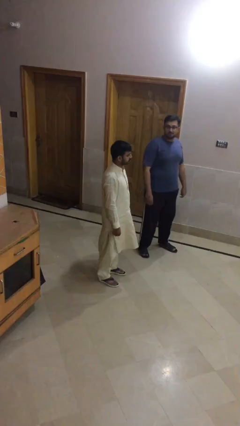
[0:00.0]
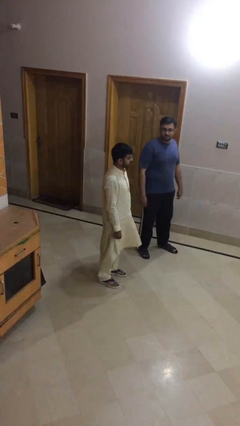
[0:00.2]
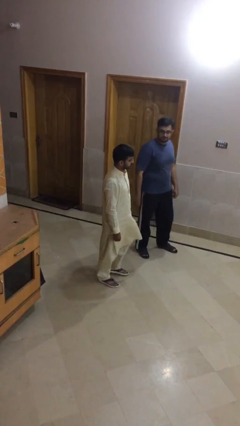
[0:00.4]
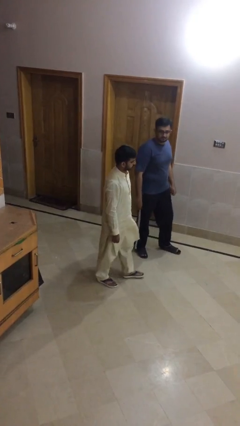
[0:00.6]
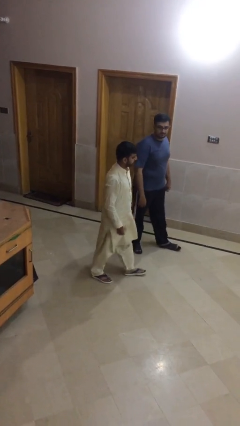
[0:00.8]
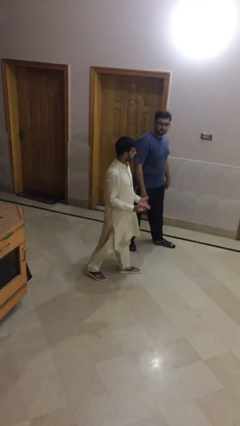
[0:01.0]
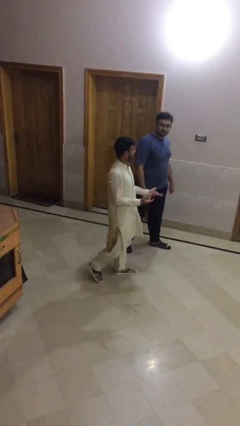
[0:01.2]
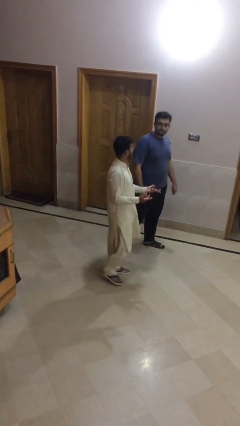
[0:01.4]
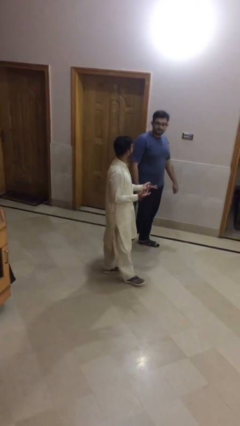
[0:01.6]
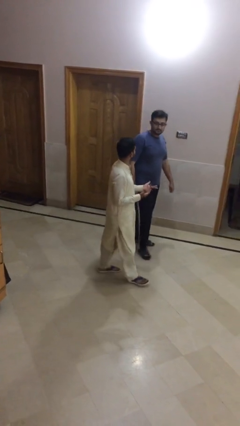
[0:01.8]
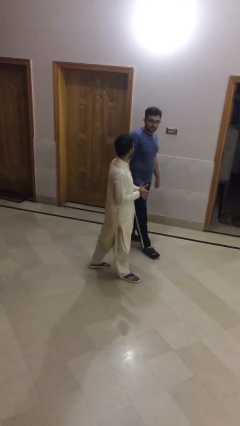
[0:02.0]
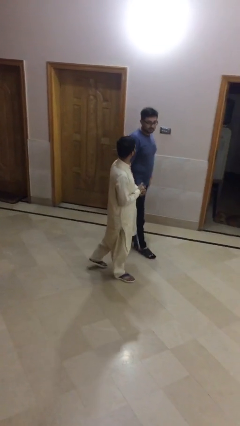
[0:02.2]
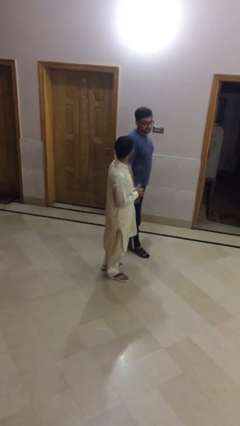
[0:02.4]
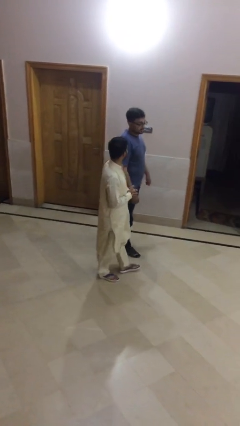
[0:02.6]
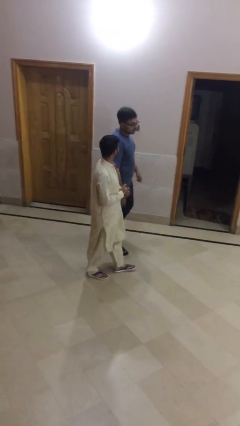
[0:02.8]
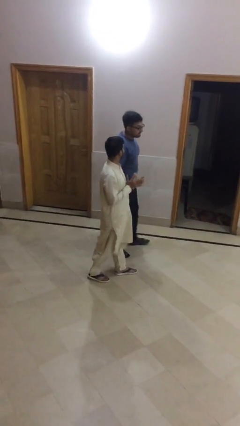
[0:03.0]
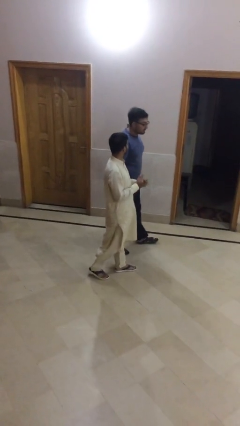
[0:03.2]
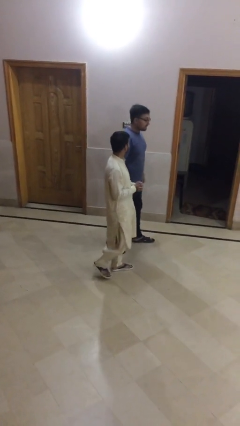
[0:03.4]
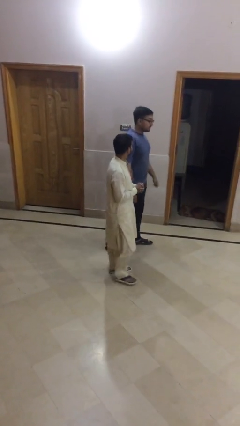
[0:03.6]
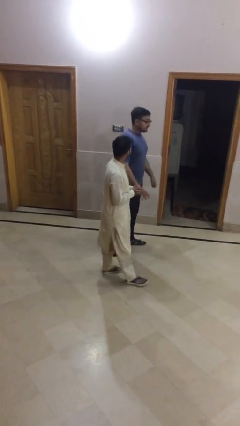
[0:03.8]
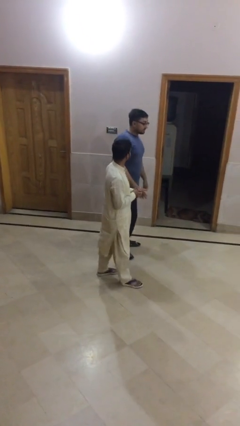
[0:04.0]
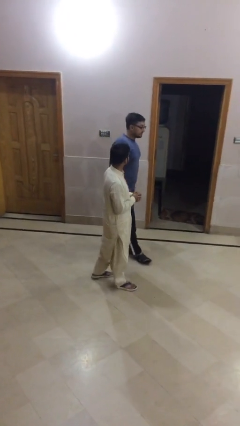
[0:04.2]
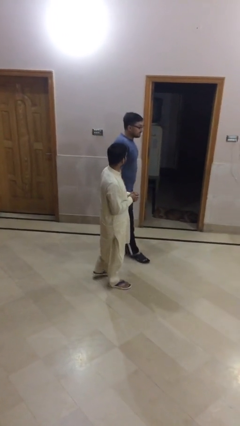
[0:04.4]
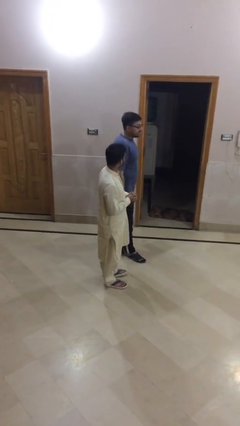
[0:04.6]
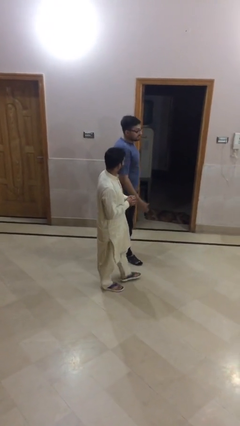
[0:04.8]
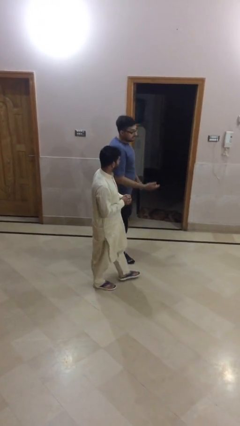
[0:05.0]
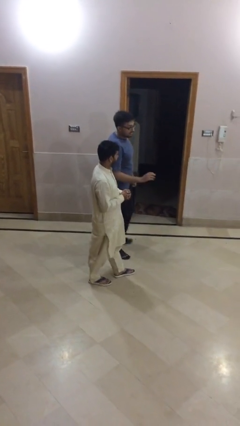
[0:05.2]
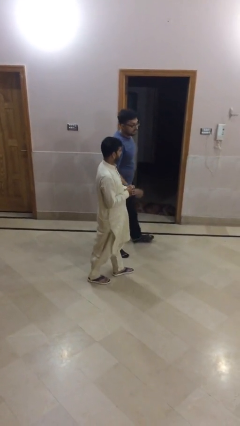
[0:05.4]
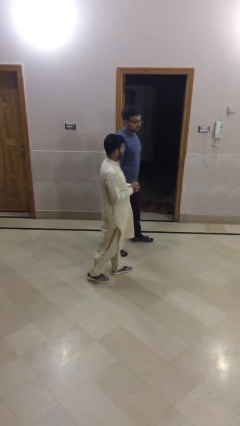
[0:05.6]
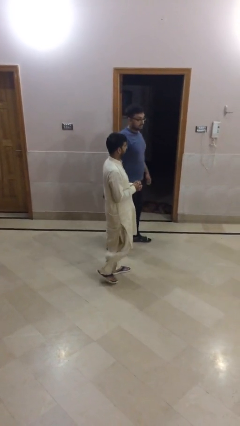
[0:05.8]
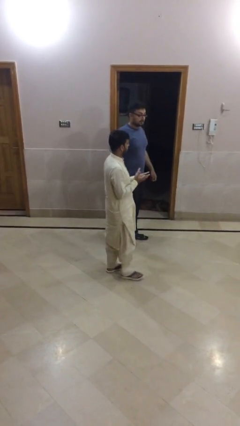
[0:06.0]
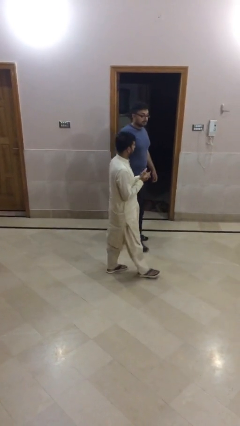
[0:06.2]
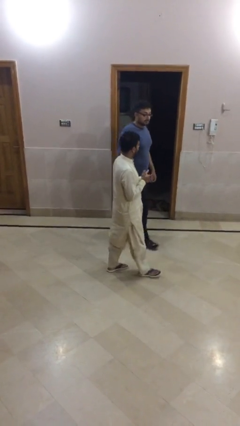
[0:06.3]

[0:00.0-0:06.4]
person talks to person

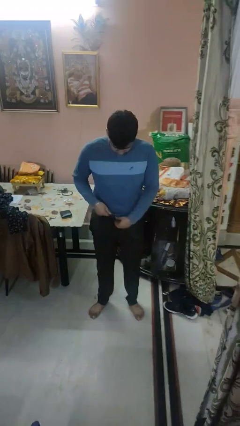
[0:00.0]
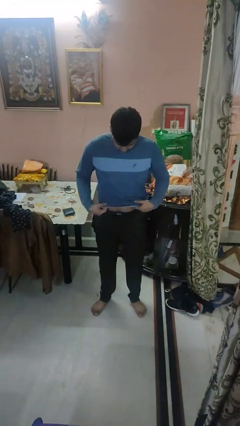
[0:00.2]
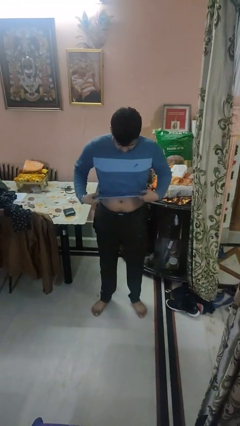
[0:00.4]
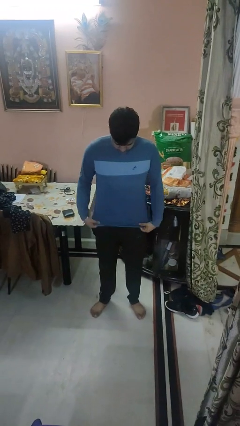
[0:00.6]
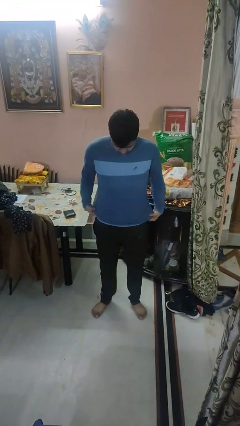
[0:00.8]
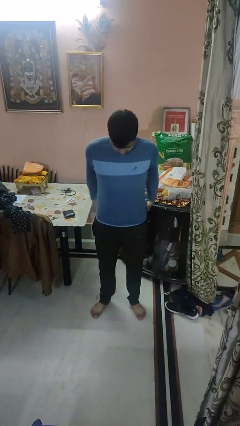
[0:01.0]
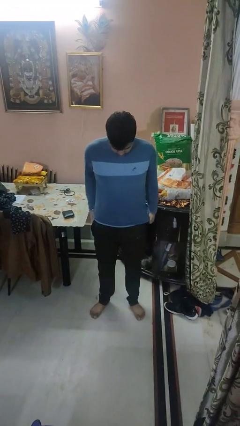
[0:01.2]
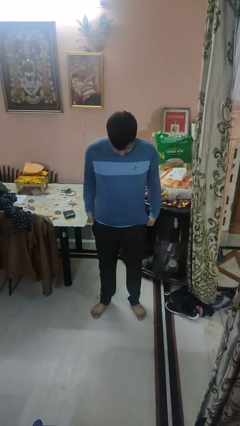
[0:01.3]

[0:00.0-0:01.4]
person untucks shirt

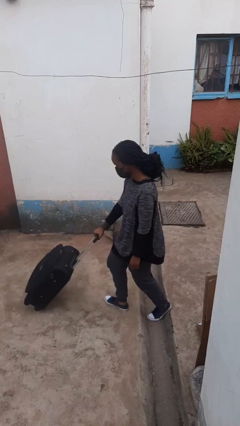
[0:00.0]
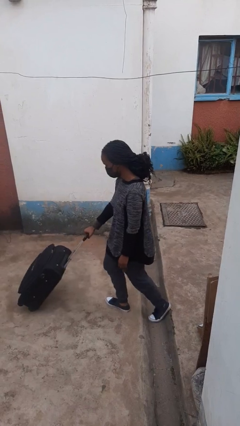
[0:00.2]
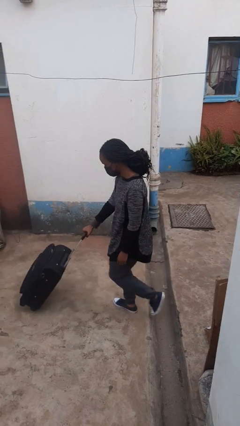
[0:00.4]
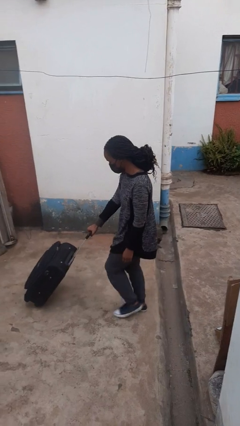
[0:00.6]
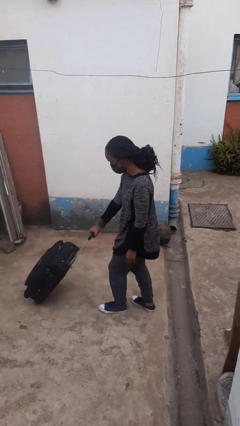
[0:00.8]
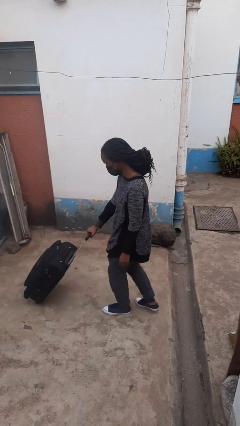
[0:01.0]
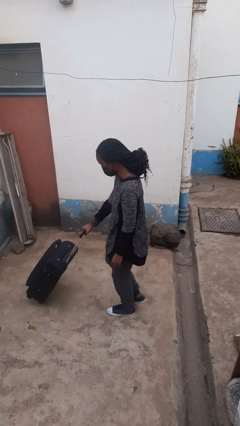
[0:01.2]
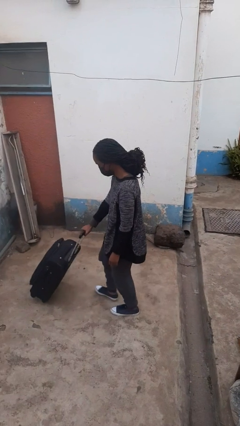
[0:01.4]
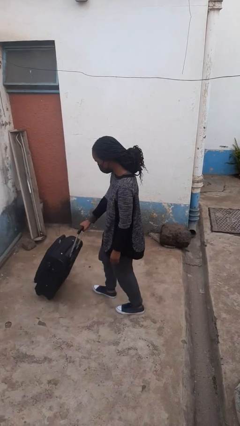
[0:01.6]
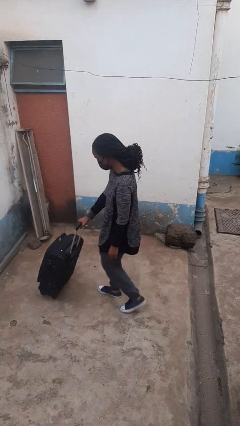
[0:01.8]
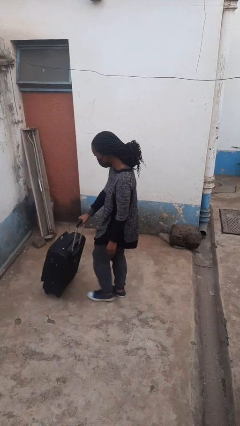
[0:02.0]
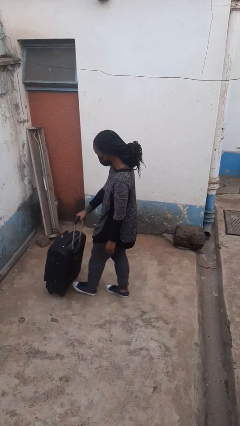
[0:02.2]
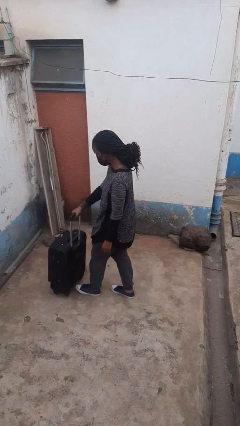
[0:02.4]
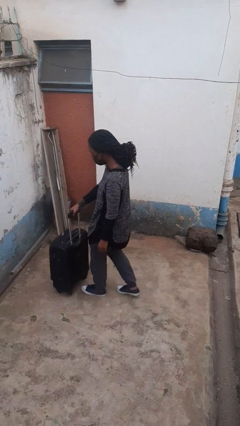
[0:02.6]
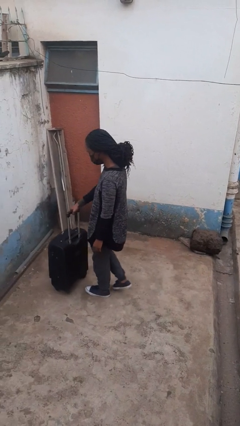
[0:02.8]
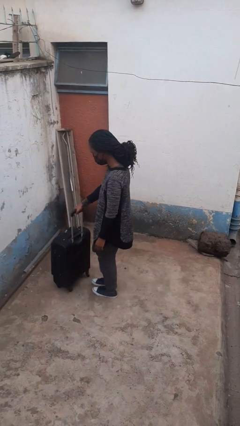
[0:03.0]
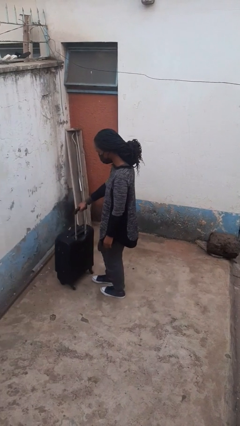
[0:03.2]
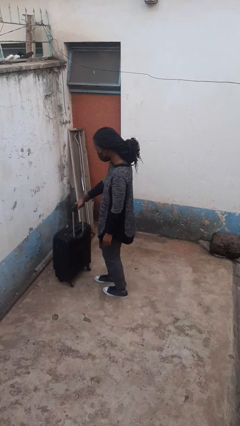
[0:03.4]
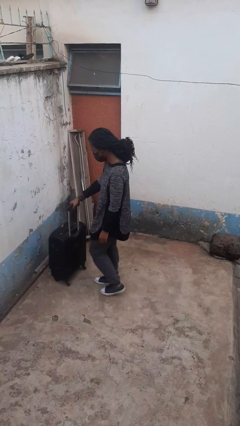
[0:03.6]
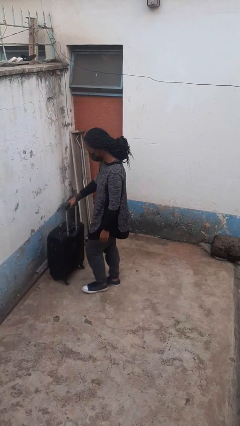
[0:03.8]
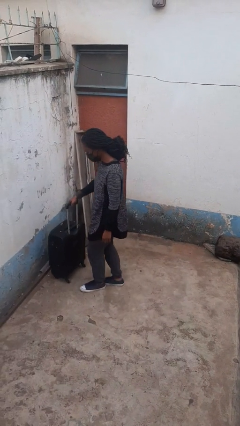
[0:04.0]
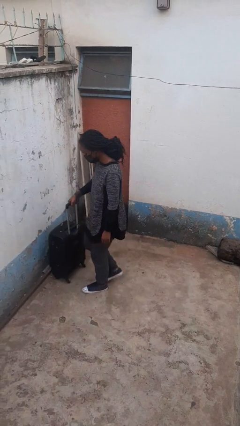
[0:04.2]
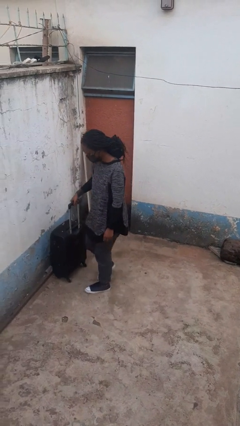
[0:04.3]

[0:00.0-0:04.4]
person pushes wheeled cart

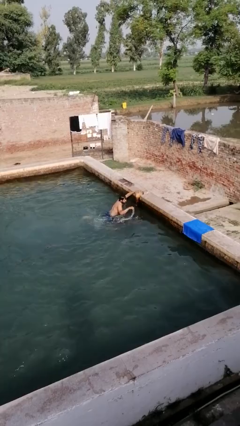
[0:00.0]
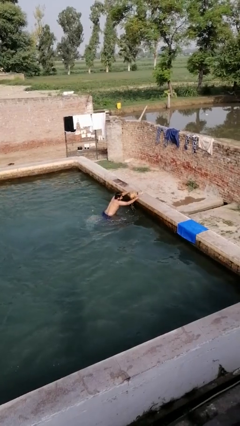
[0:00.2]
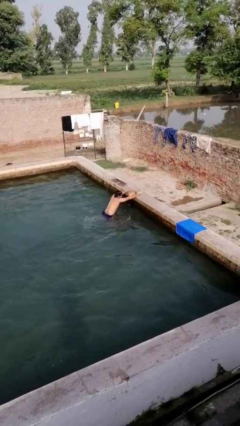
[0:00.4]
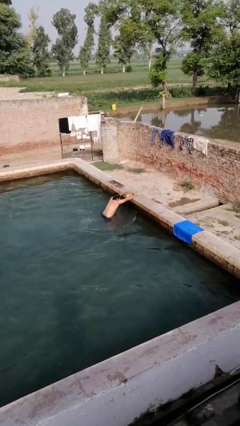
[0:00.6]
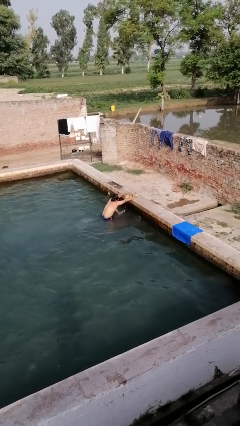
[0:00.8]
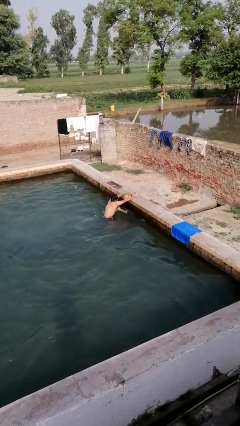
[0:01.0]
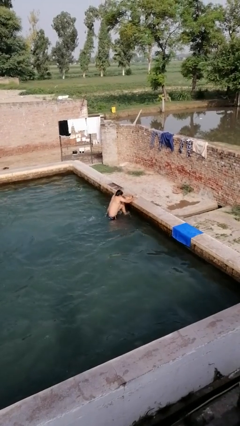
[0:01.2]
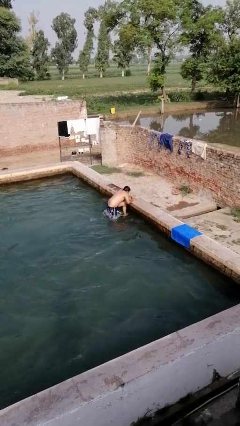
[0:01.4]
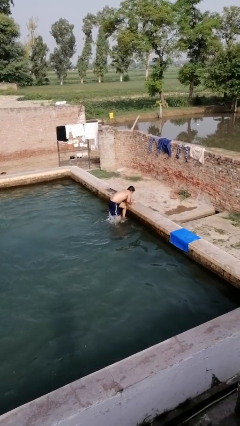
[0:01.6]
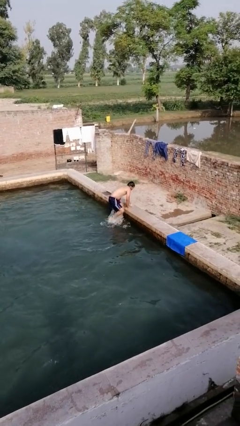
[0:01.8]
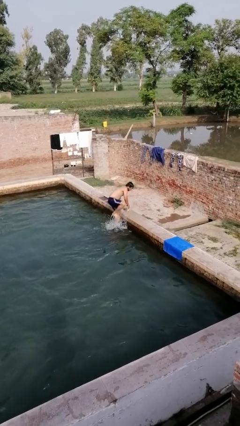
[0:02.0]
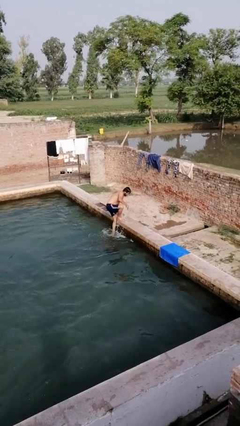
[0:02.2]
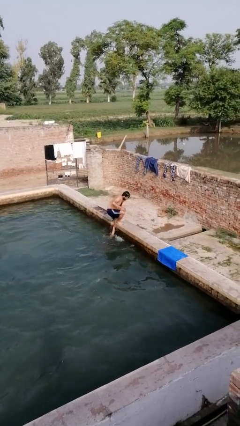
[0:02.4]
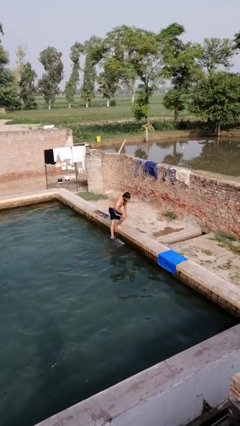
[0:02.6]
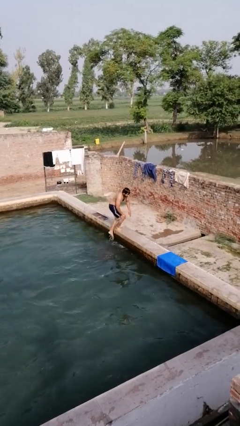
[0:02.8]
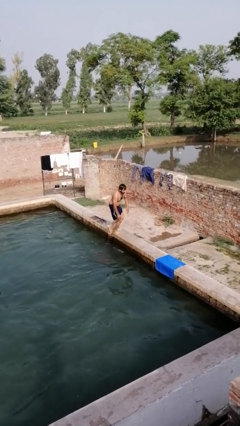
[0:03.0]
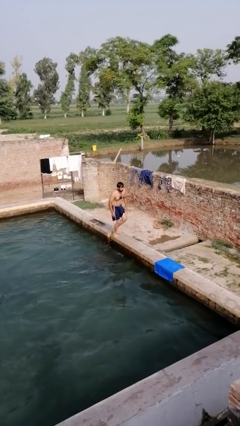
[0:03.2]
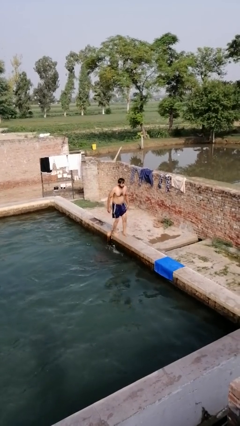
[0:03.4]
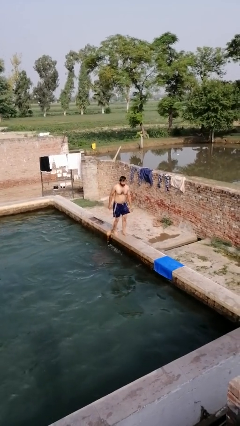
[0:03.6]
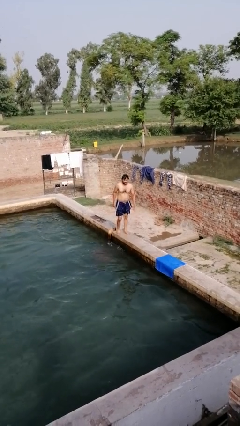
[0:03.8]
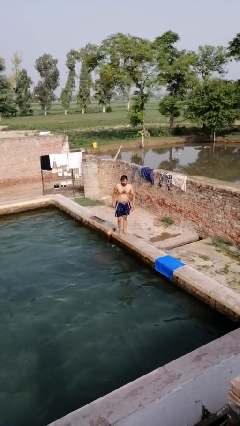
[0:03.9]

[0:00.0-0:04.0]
person exits pool

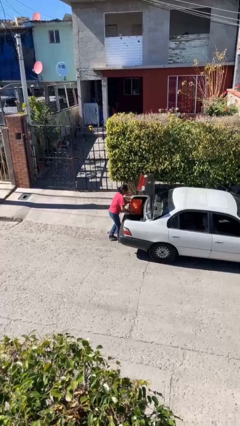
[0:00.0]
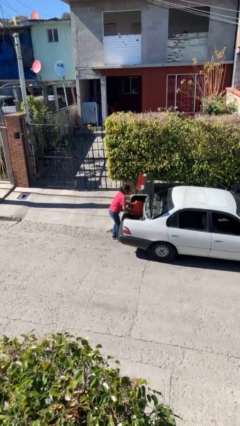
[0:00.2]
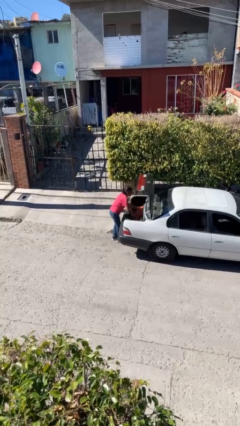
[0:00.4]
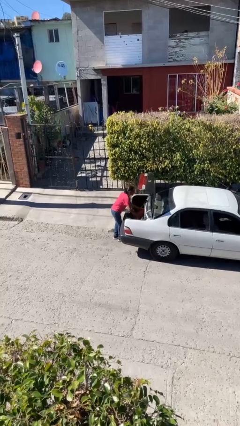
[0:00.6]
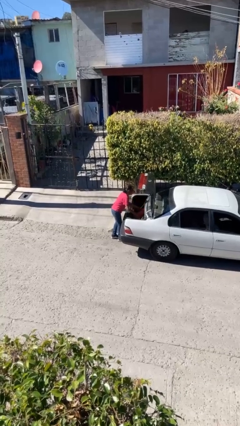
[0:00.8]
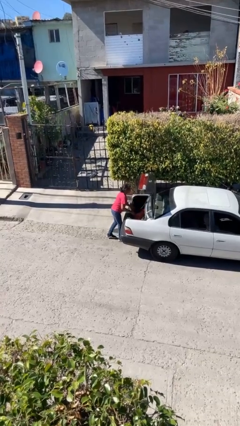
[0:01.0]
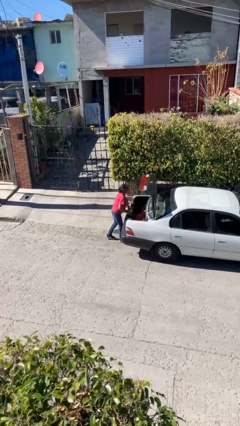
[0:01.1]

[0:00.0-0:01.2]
person loads car

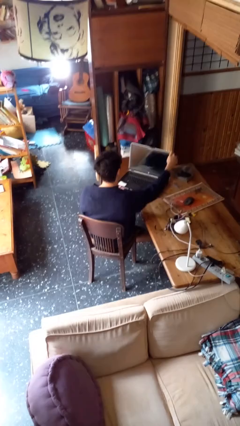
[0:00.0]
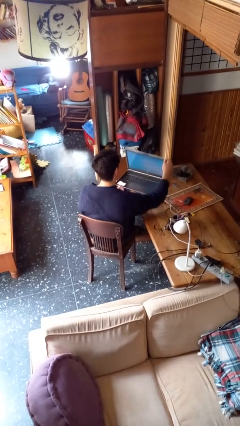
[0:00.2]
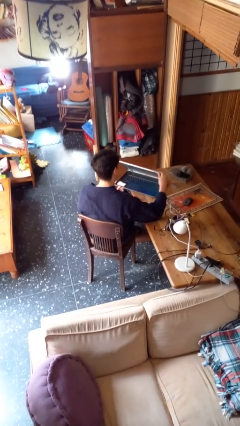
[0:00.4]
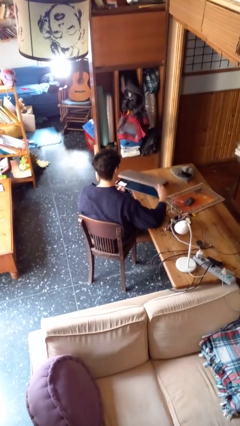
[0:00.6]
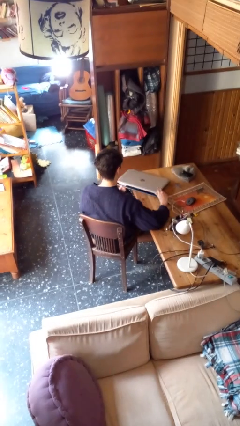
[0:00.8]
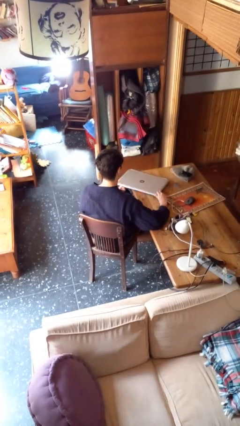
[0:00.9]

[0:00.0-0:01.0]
person closes laptop
